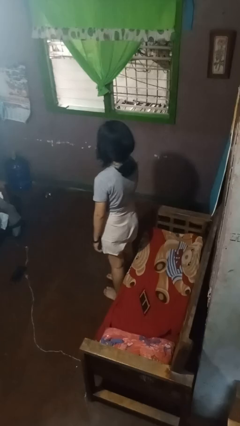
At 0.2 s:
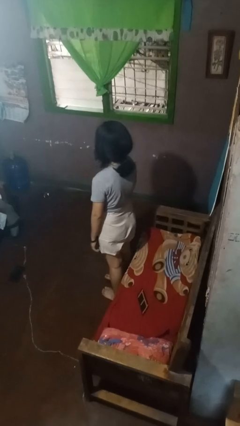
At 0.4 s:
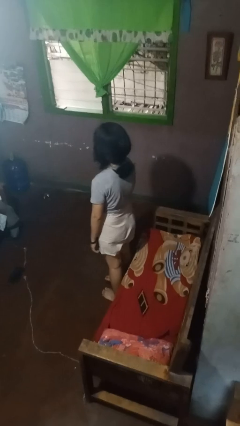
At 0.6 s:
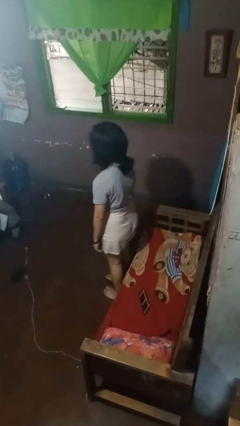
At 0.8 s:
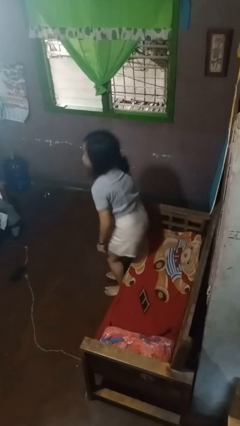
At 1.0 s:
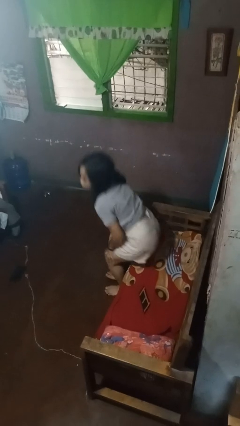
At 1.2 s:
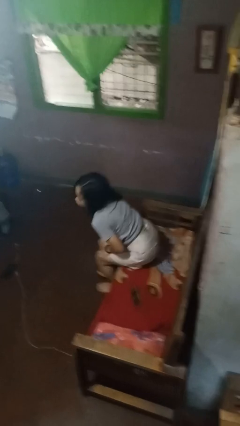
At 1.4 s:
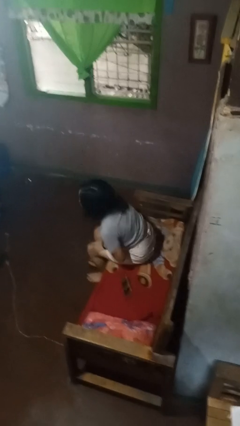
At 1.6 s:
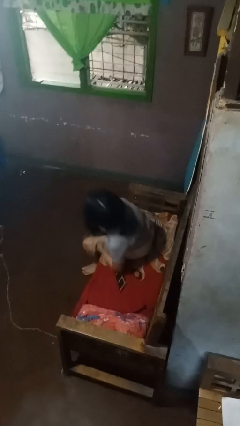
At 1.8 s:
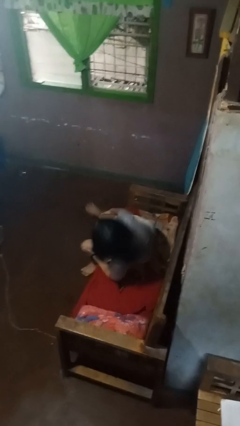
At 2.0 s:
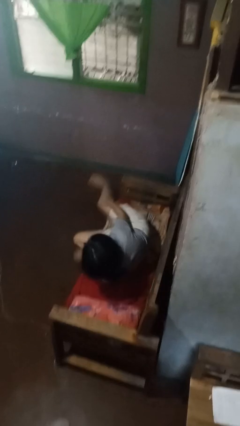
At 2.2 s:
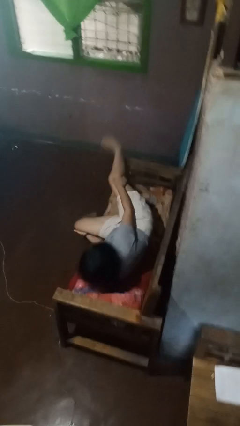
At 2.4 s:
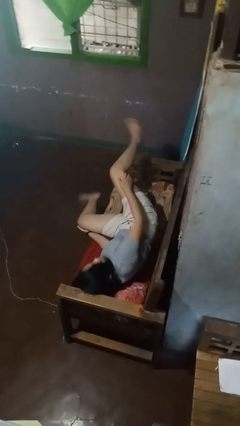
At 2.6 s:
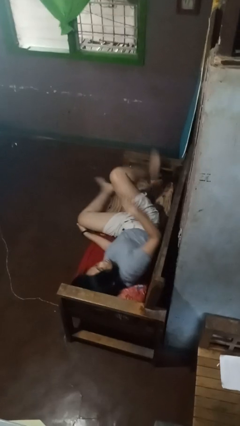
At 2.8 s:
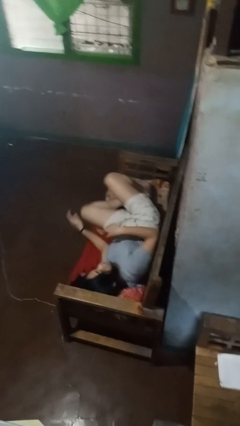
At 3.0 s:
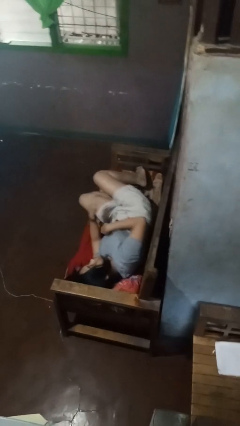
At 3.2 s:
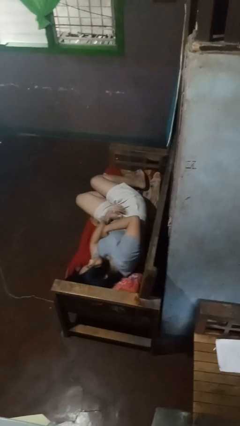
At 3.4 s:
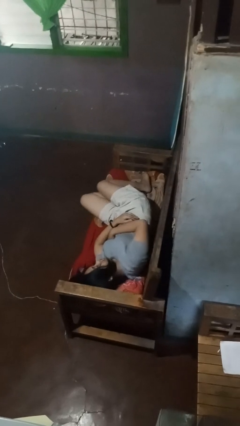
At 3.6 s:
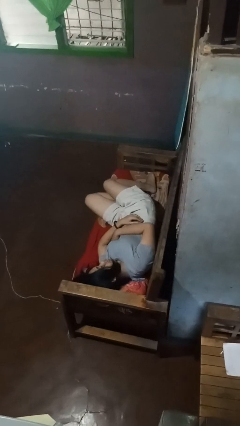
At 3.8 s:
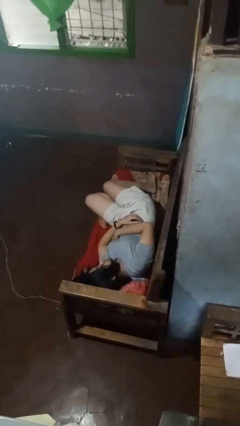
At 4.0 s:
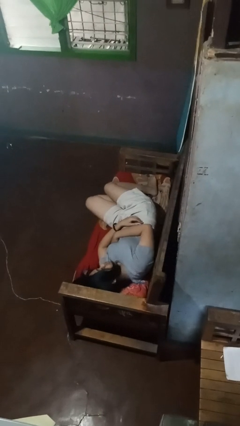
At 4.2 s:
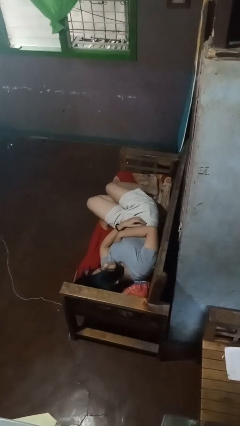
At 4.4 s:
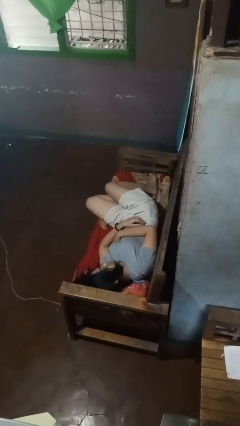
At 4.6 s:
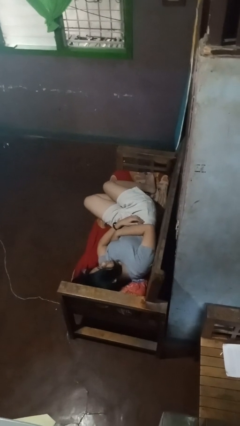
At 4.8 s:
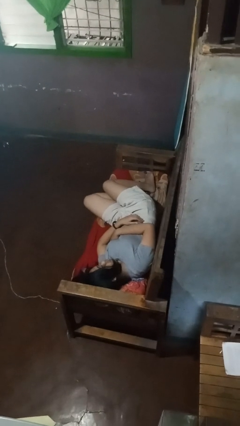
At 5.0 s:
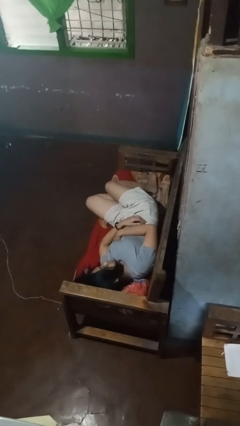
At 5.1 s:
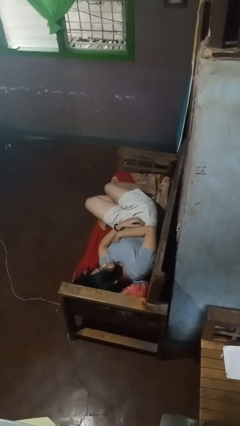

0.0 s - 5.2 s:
person lies down on bed

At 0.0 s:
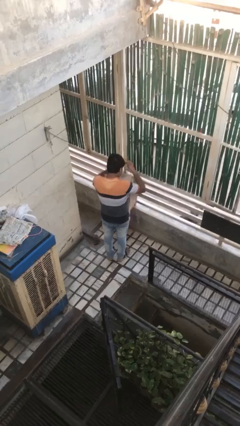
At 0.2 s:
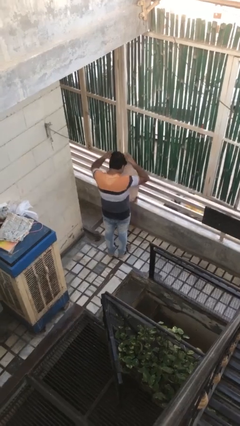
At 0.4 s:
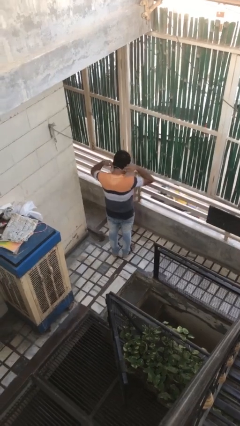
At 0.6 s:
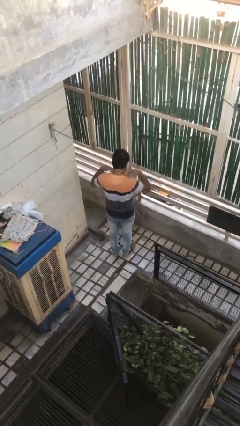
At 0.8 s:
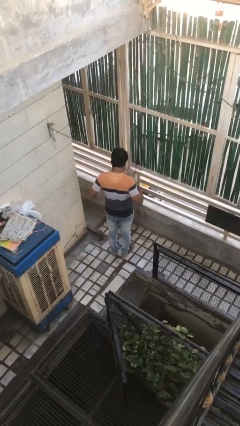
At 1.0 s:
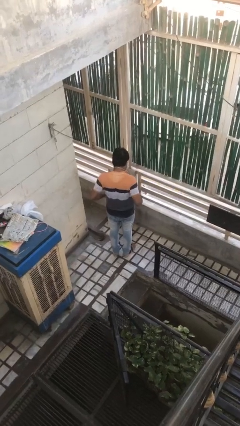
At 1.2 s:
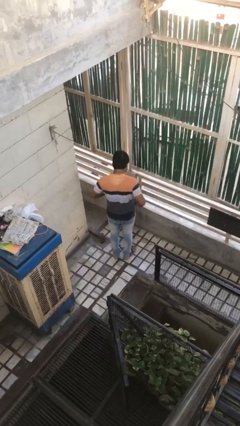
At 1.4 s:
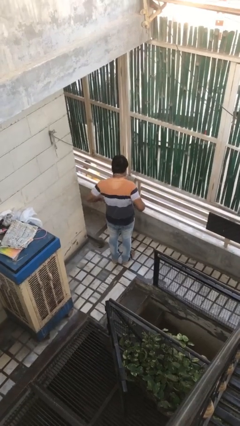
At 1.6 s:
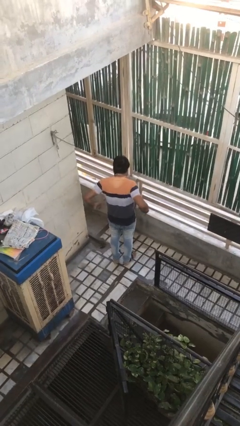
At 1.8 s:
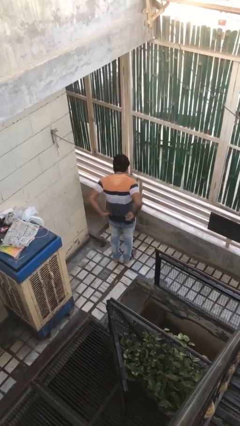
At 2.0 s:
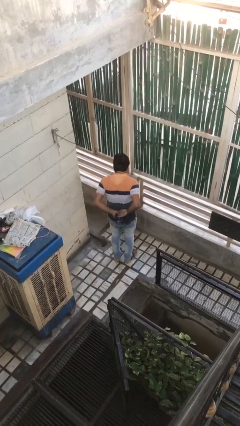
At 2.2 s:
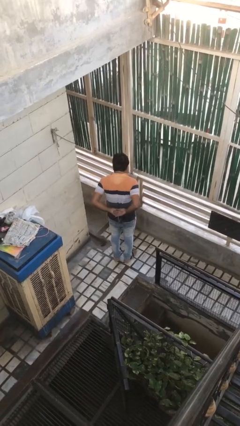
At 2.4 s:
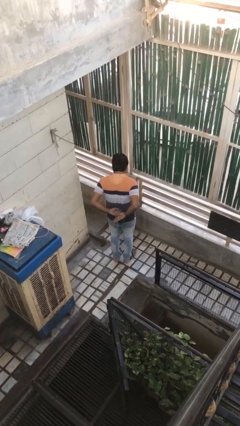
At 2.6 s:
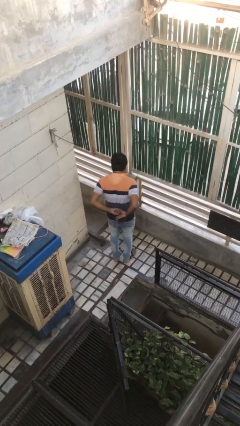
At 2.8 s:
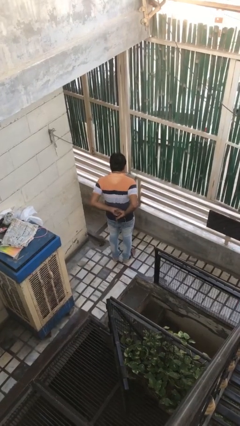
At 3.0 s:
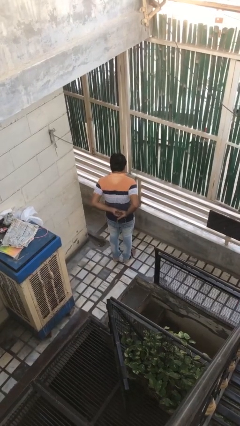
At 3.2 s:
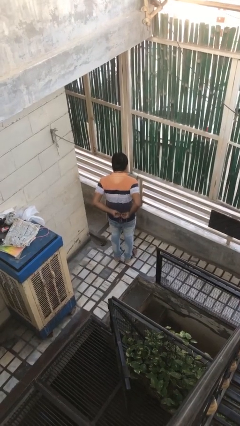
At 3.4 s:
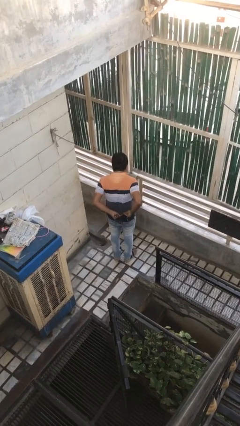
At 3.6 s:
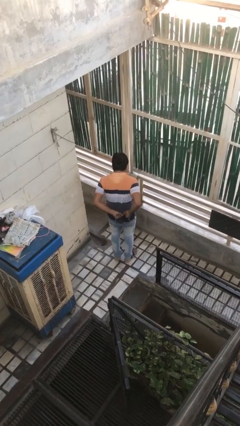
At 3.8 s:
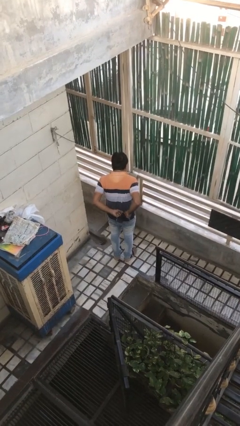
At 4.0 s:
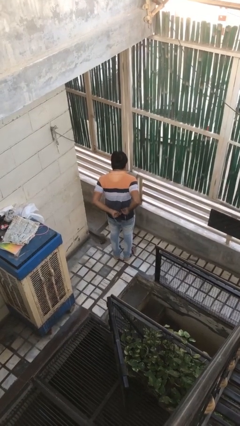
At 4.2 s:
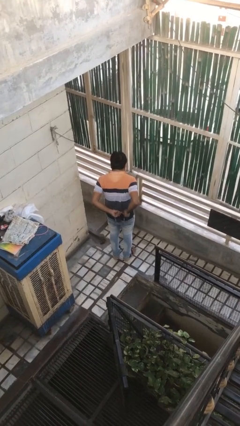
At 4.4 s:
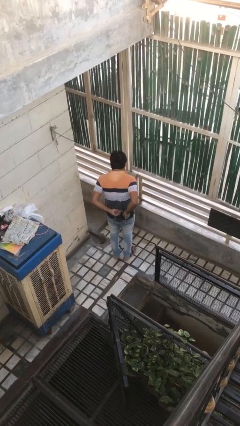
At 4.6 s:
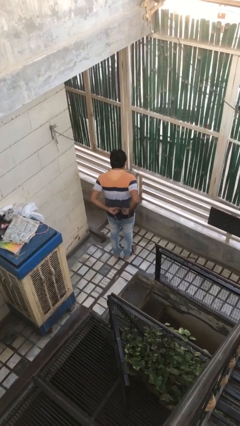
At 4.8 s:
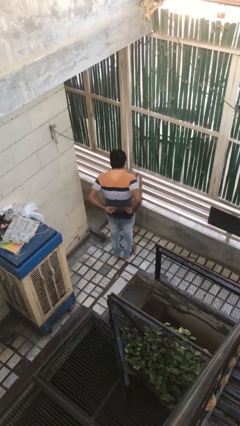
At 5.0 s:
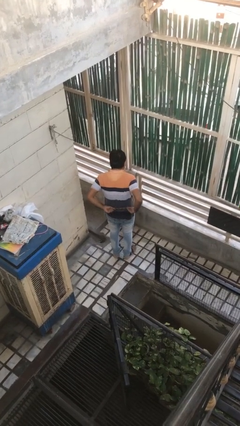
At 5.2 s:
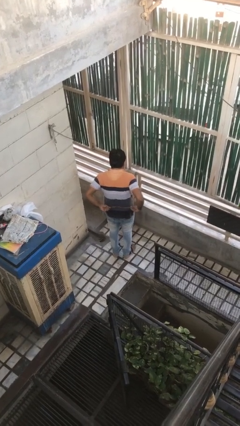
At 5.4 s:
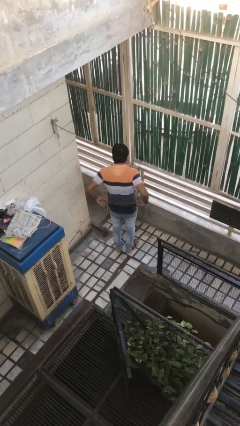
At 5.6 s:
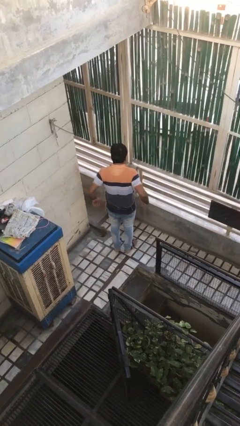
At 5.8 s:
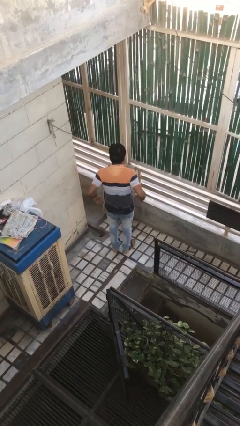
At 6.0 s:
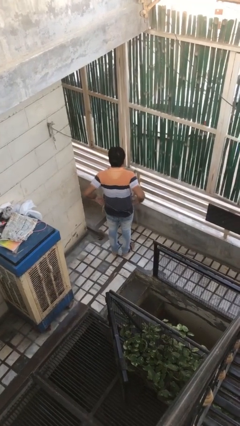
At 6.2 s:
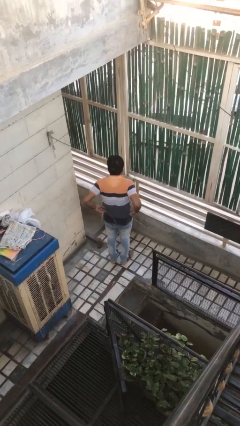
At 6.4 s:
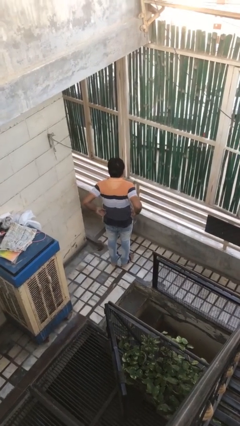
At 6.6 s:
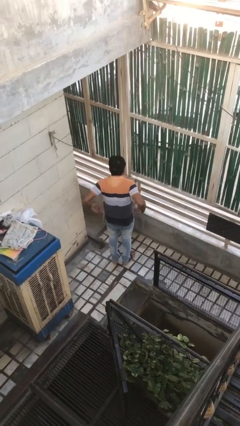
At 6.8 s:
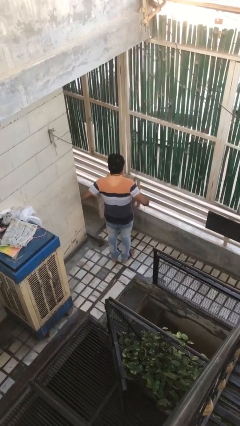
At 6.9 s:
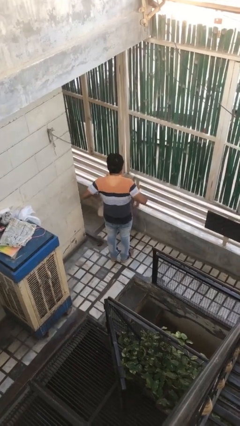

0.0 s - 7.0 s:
person puts on apron

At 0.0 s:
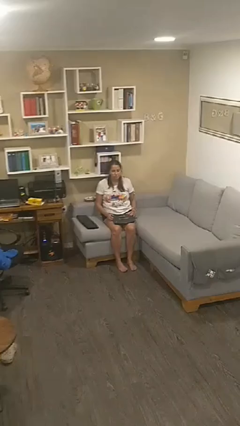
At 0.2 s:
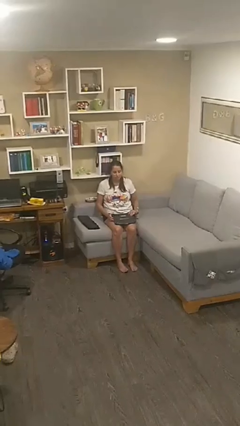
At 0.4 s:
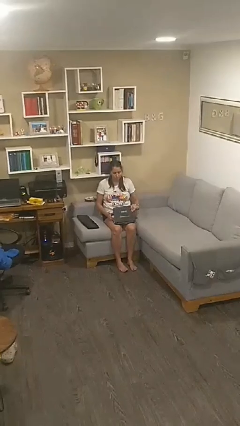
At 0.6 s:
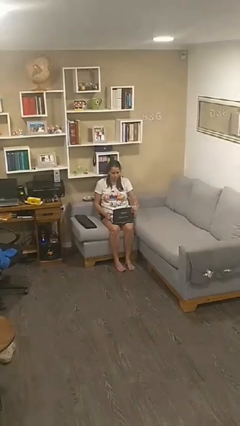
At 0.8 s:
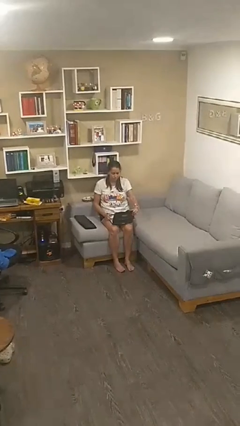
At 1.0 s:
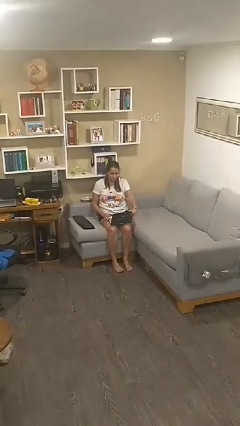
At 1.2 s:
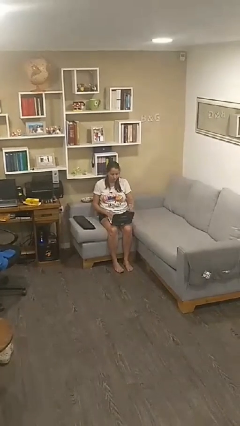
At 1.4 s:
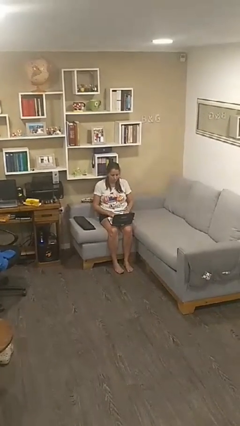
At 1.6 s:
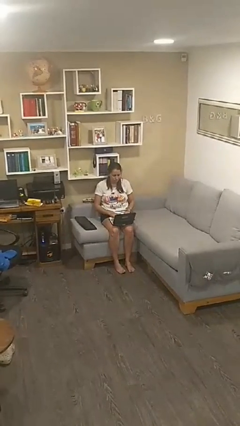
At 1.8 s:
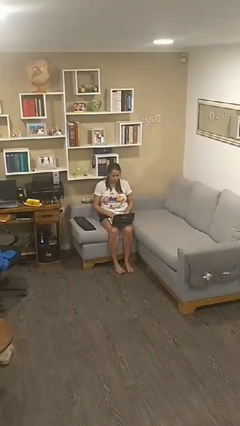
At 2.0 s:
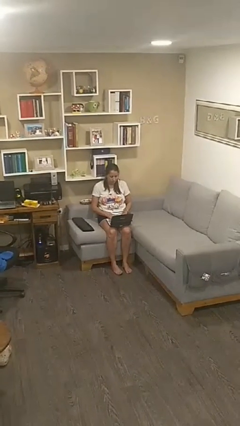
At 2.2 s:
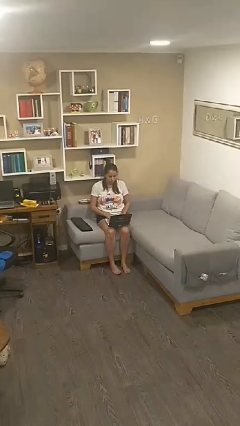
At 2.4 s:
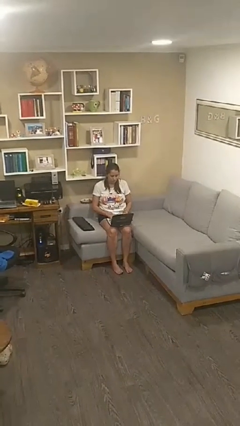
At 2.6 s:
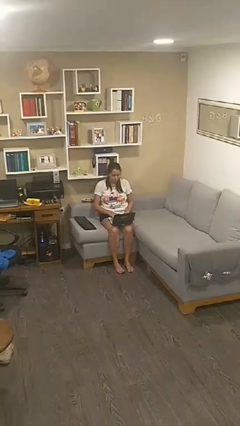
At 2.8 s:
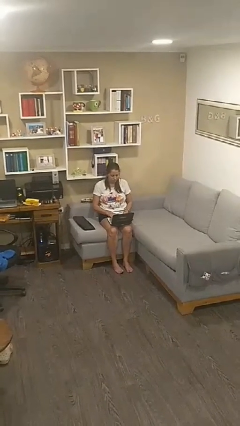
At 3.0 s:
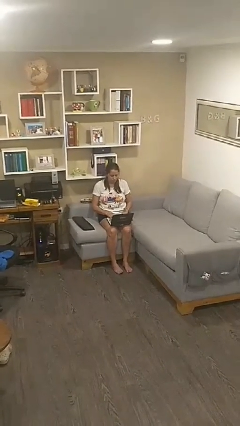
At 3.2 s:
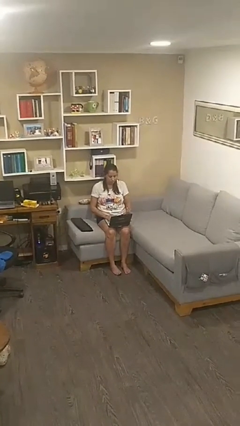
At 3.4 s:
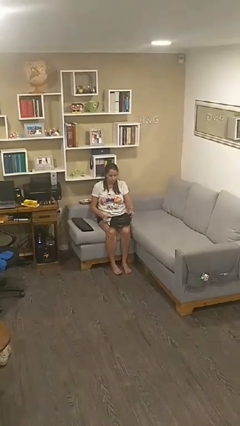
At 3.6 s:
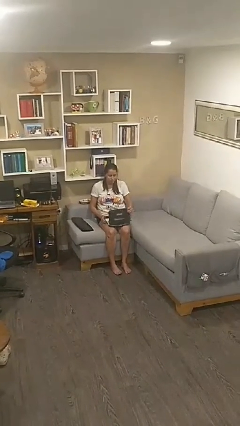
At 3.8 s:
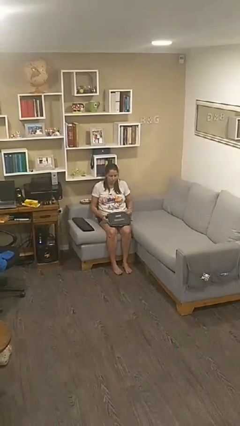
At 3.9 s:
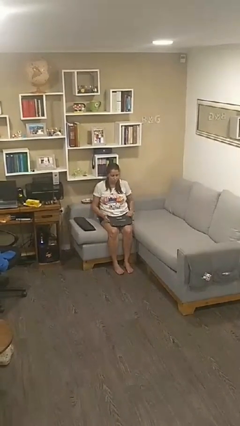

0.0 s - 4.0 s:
person interacts with laptop

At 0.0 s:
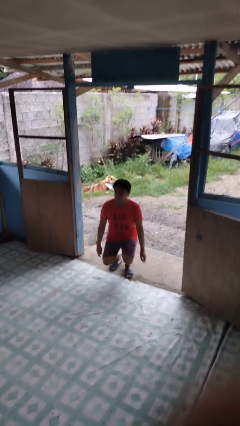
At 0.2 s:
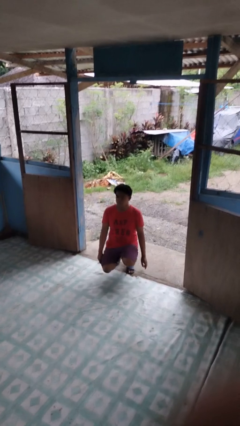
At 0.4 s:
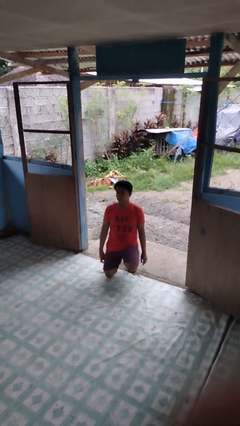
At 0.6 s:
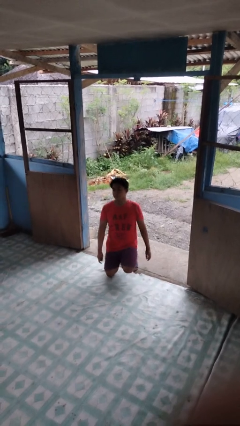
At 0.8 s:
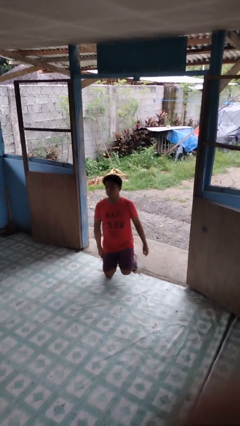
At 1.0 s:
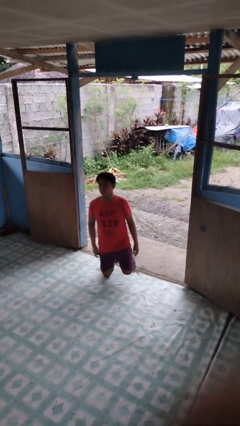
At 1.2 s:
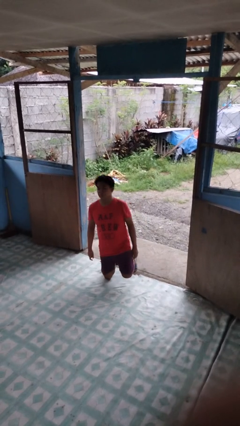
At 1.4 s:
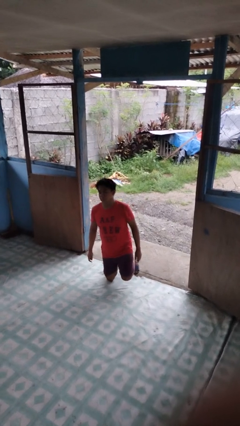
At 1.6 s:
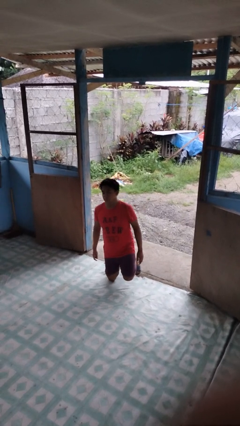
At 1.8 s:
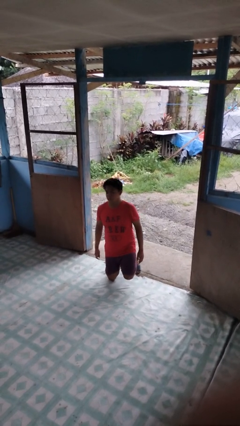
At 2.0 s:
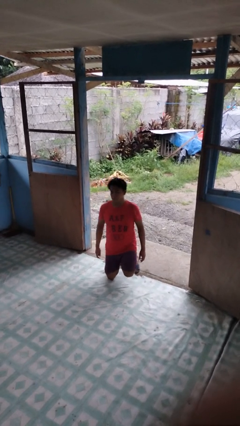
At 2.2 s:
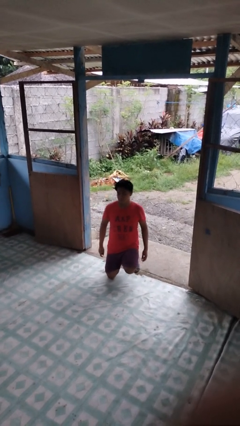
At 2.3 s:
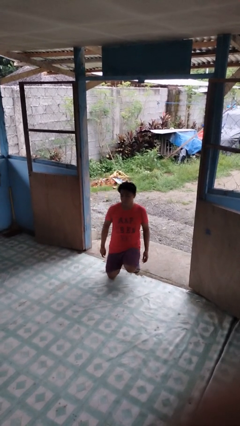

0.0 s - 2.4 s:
person kneels
